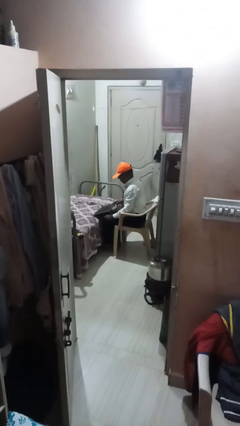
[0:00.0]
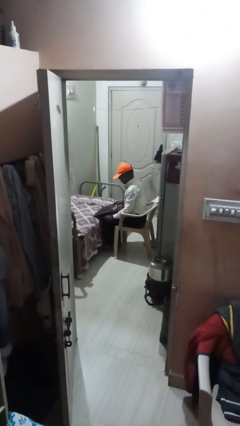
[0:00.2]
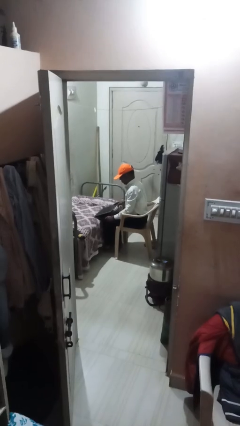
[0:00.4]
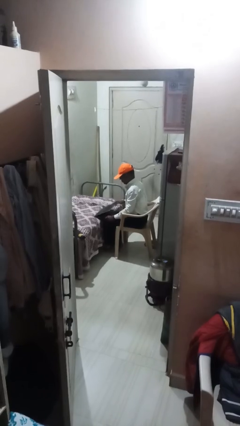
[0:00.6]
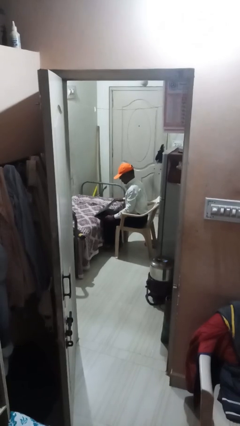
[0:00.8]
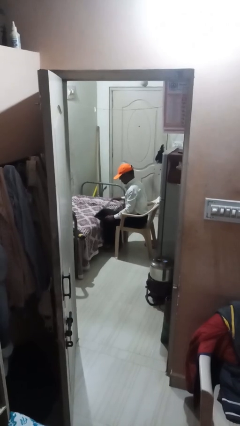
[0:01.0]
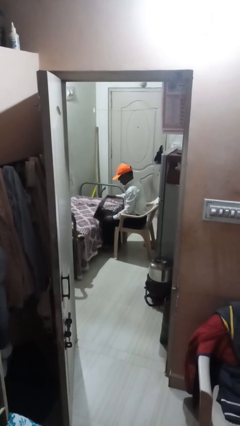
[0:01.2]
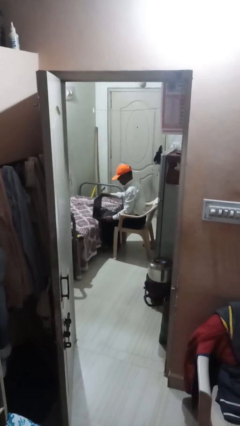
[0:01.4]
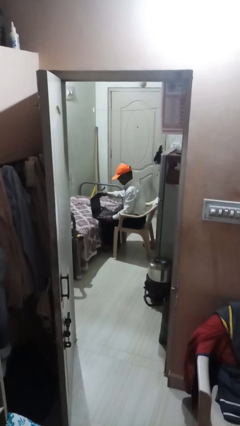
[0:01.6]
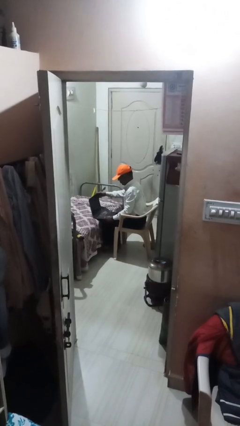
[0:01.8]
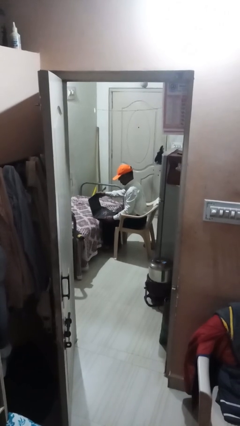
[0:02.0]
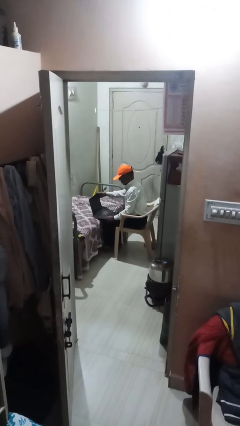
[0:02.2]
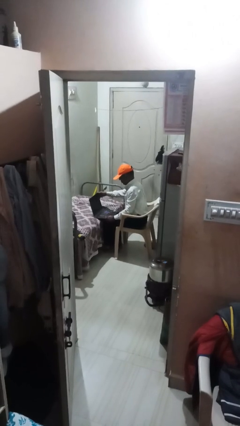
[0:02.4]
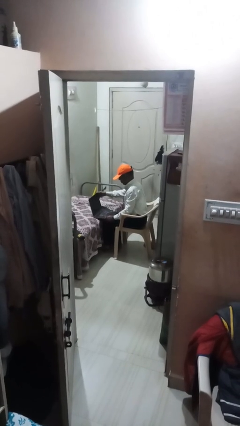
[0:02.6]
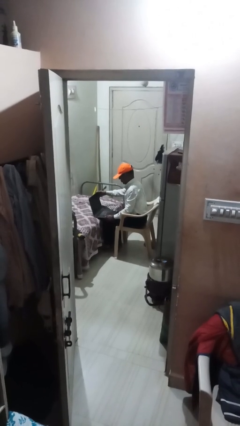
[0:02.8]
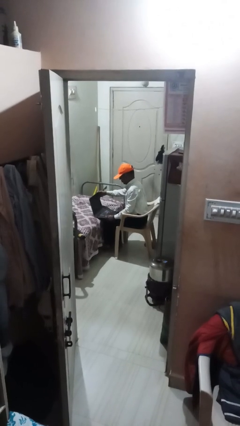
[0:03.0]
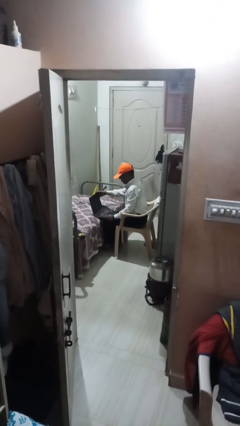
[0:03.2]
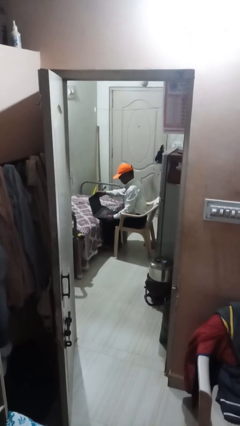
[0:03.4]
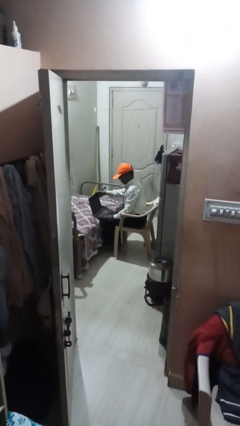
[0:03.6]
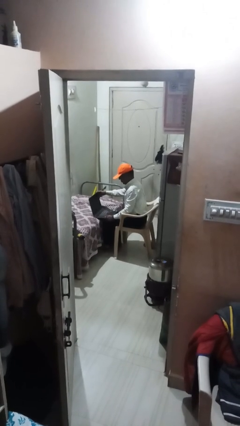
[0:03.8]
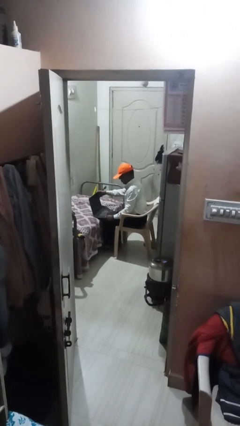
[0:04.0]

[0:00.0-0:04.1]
person interacts with laptop

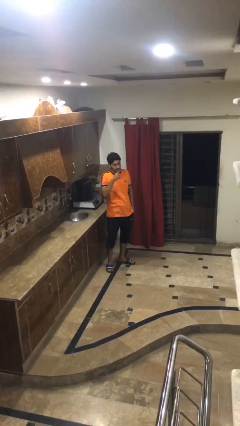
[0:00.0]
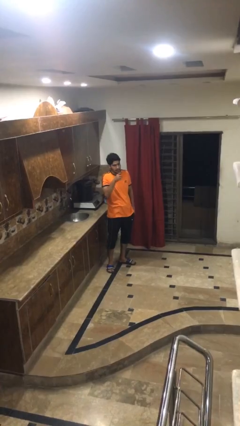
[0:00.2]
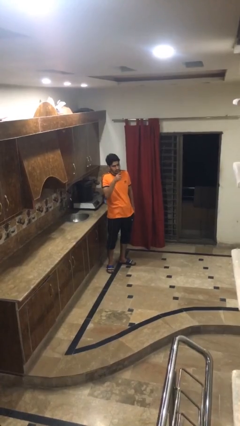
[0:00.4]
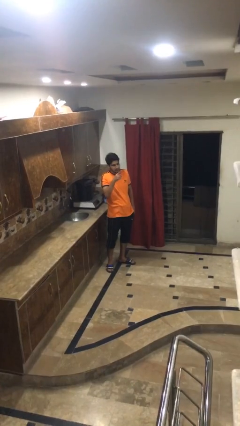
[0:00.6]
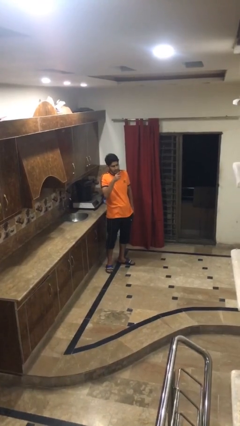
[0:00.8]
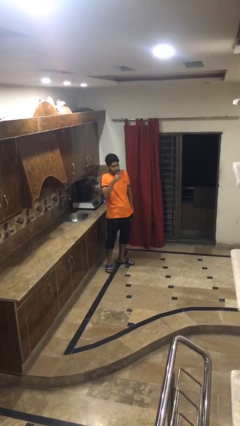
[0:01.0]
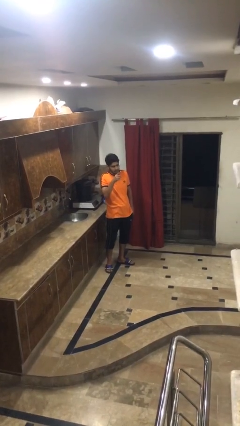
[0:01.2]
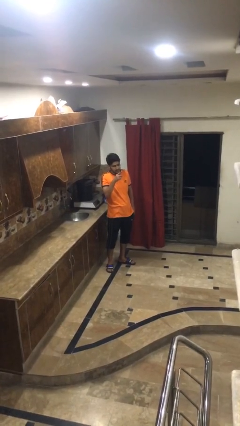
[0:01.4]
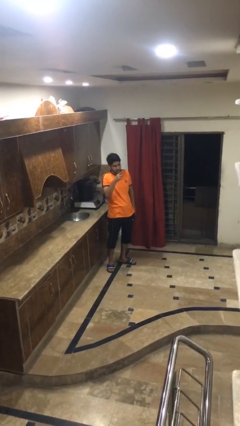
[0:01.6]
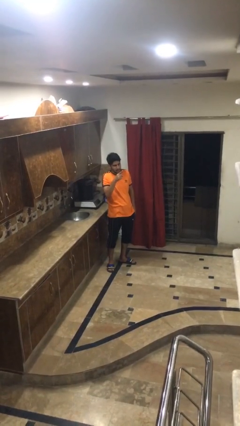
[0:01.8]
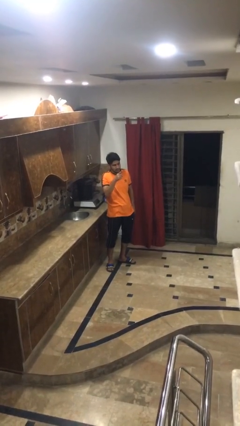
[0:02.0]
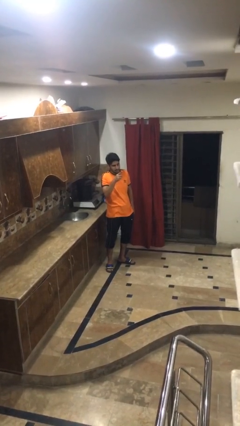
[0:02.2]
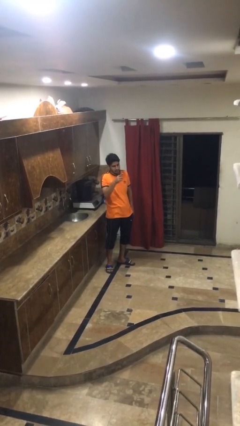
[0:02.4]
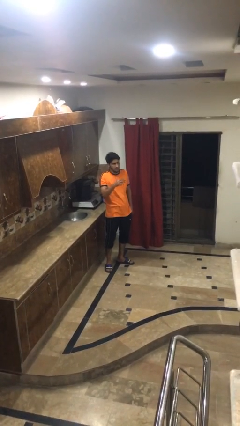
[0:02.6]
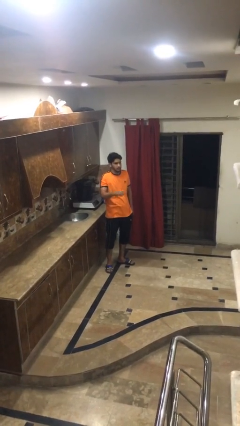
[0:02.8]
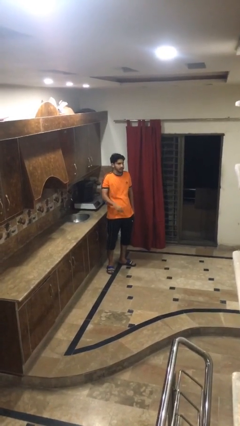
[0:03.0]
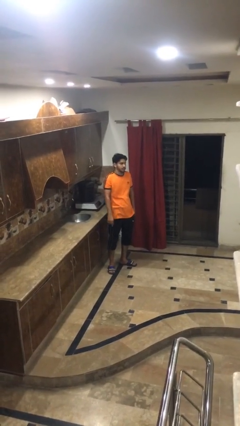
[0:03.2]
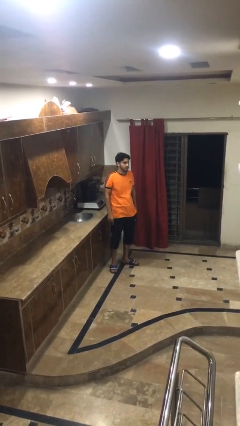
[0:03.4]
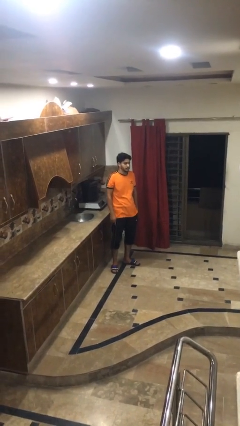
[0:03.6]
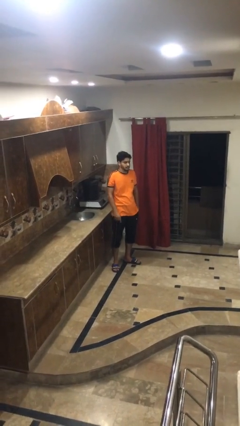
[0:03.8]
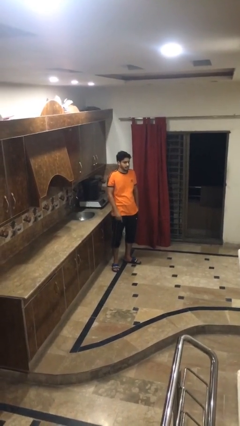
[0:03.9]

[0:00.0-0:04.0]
person points at person

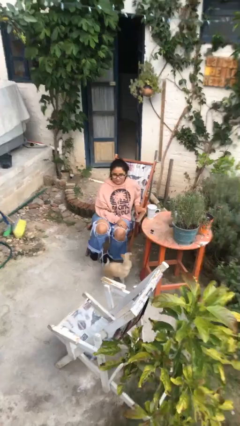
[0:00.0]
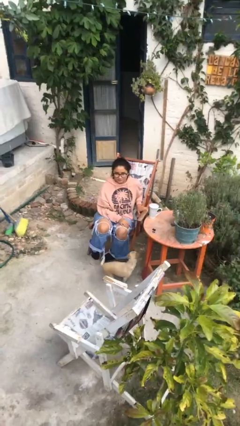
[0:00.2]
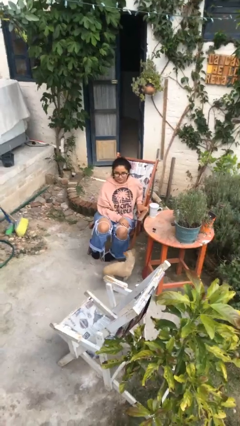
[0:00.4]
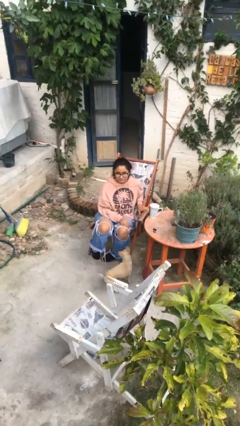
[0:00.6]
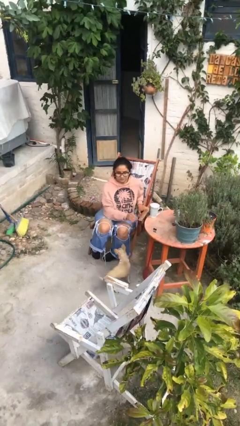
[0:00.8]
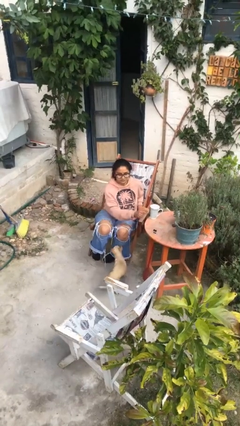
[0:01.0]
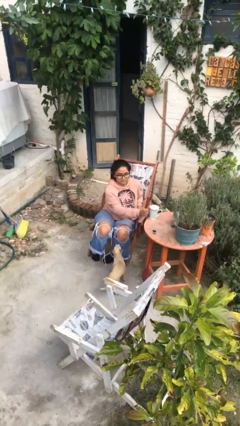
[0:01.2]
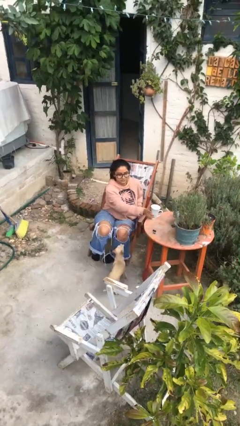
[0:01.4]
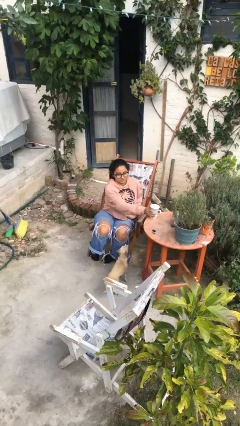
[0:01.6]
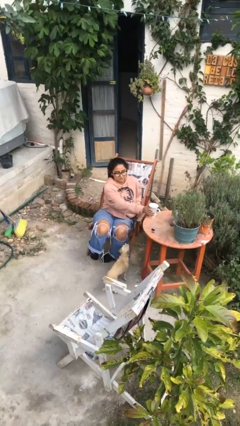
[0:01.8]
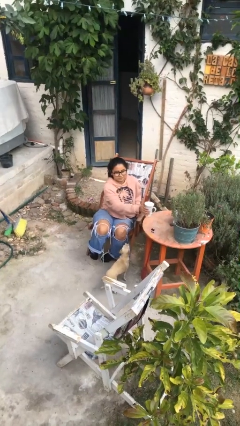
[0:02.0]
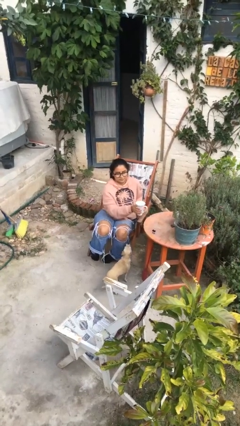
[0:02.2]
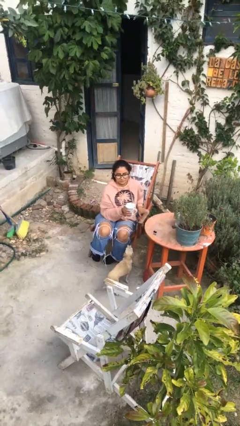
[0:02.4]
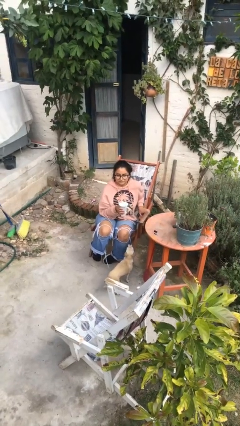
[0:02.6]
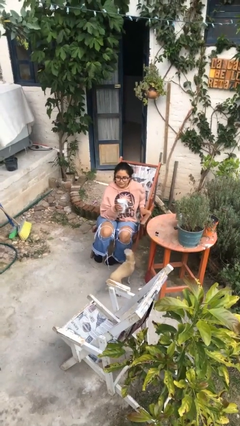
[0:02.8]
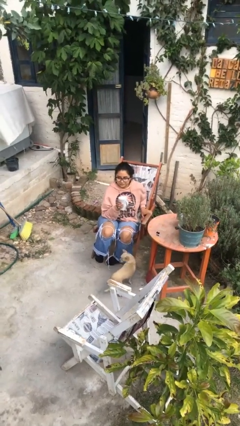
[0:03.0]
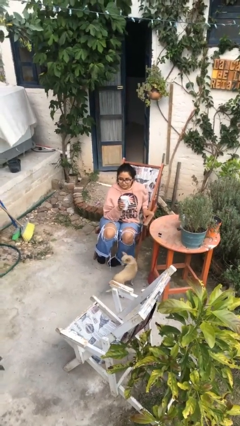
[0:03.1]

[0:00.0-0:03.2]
person picks up object from table

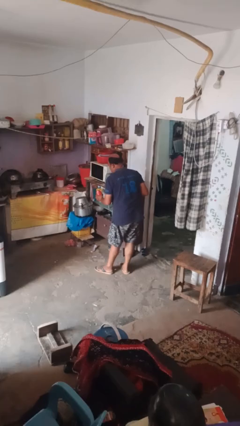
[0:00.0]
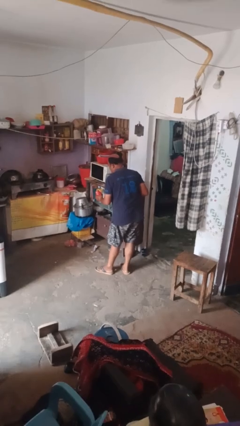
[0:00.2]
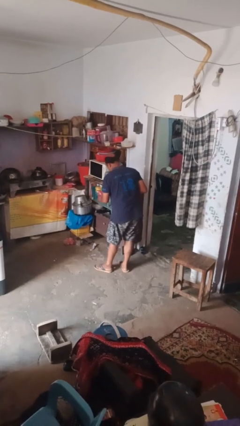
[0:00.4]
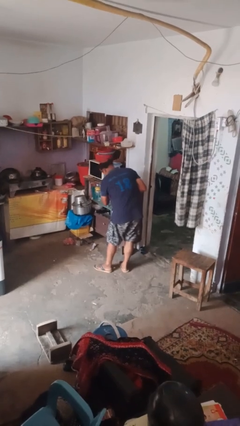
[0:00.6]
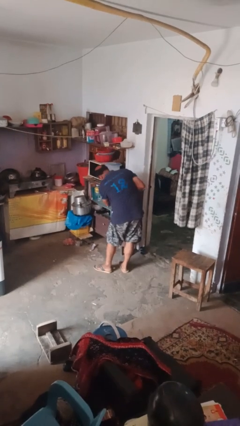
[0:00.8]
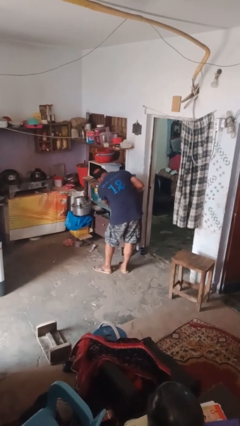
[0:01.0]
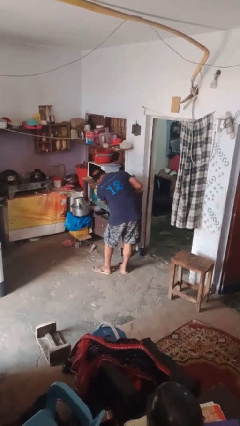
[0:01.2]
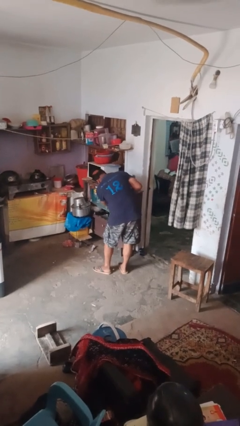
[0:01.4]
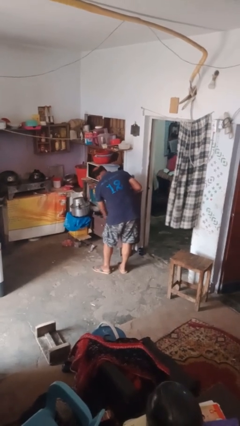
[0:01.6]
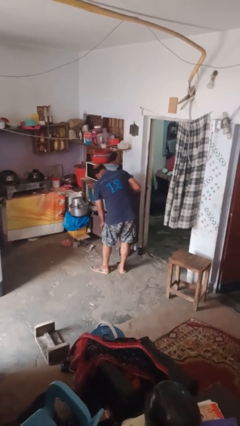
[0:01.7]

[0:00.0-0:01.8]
person puts object into kitchen drawer

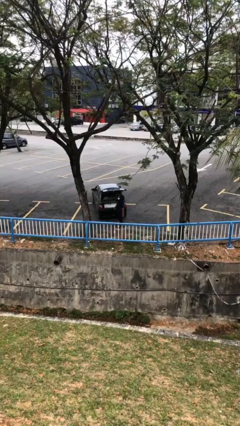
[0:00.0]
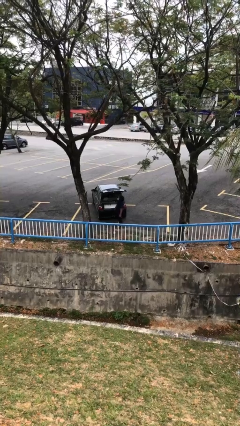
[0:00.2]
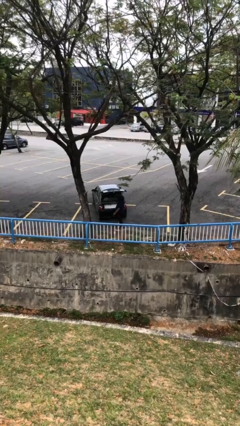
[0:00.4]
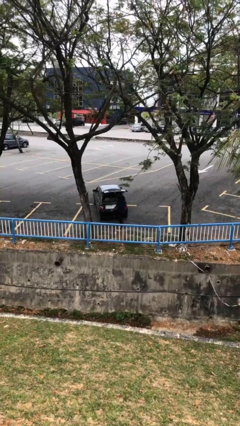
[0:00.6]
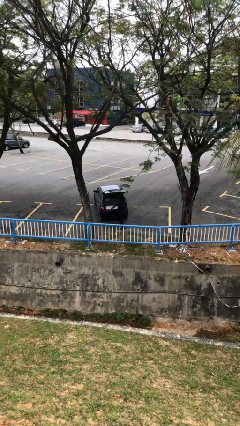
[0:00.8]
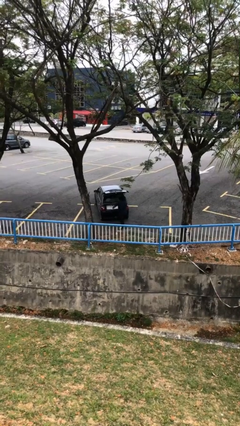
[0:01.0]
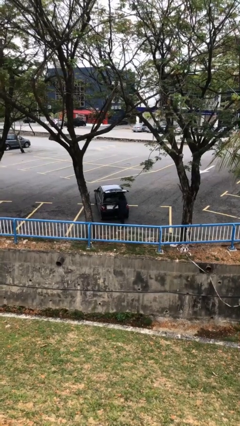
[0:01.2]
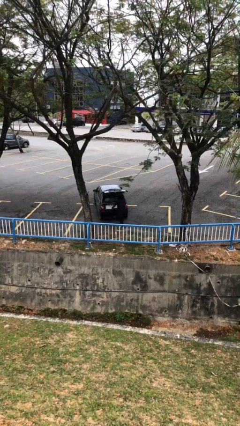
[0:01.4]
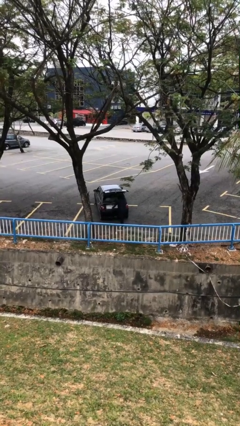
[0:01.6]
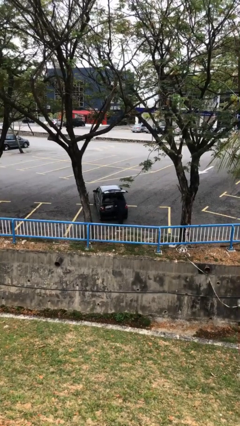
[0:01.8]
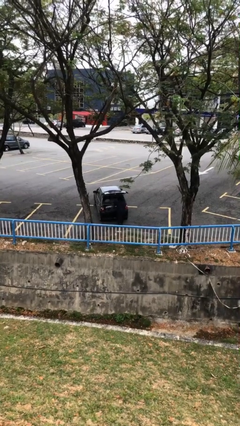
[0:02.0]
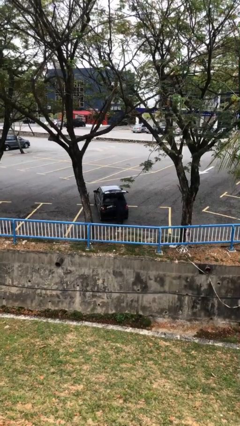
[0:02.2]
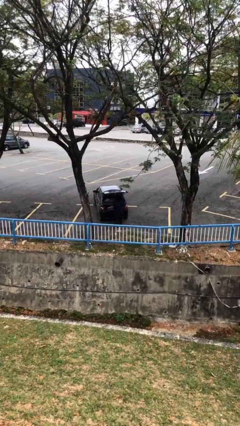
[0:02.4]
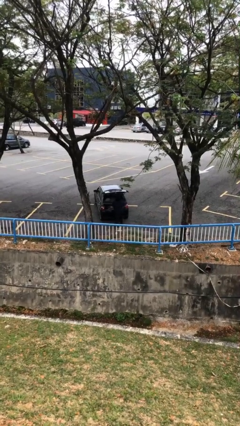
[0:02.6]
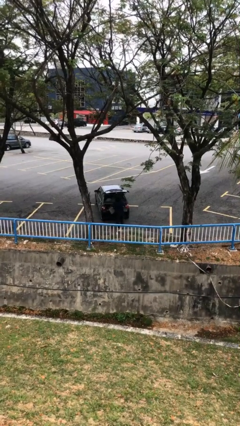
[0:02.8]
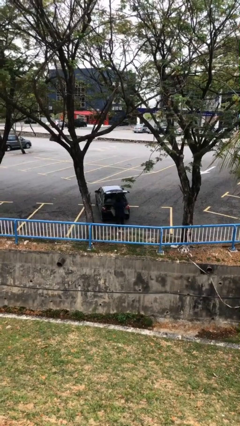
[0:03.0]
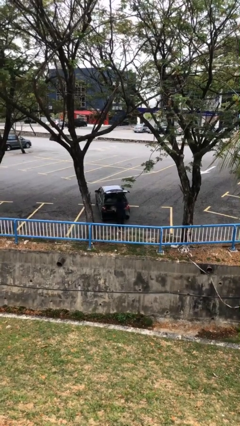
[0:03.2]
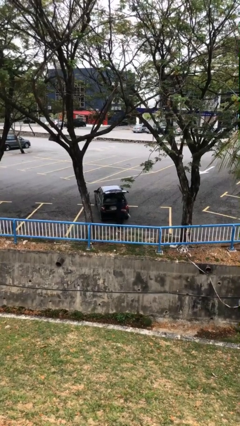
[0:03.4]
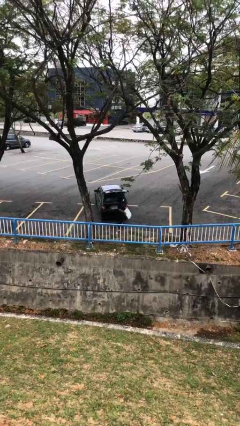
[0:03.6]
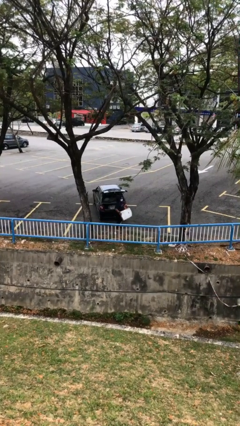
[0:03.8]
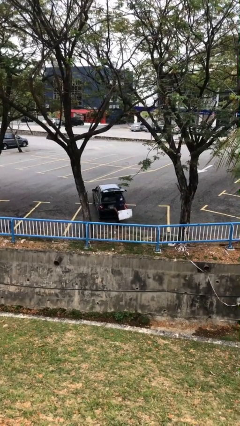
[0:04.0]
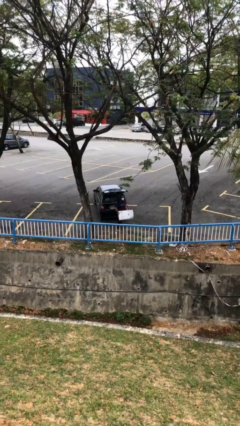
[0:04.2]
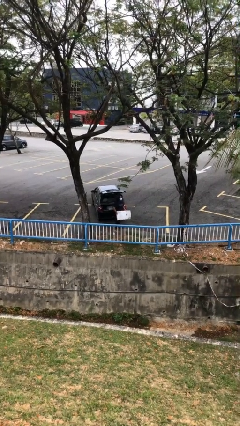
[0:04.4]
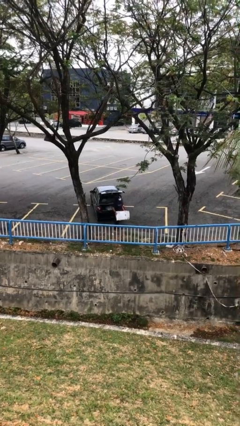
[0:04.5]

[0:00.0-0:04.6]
person unloads car
